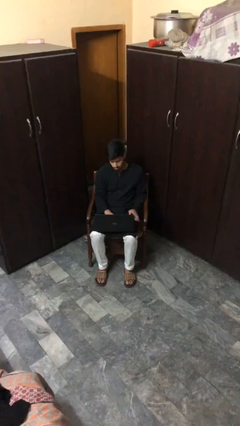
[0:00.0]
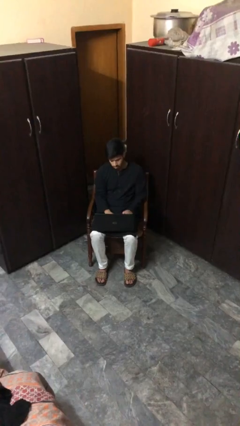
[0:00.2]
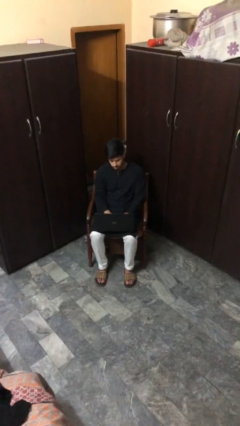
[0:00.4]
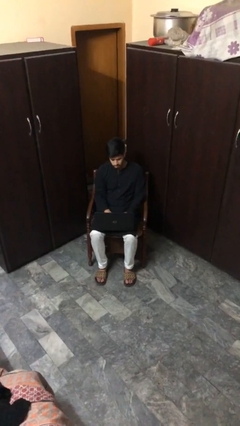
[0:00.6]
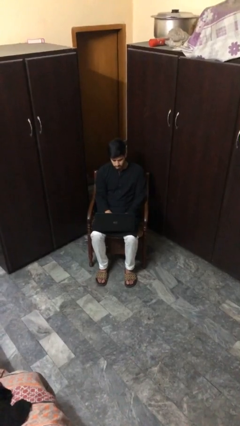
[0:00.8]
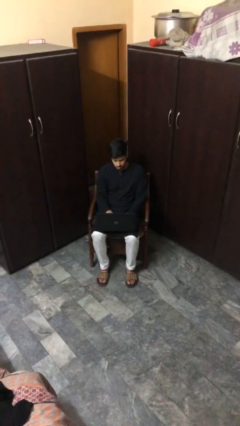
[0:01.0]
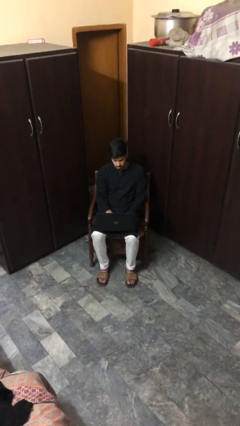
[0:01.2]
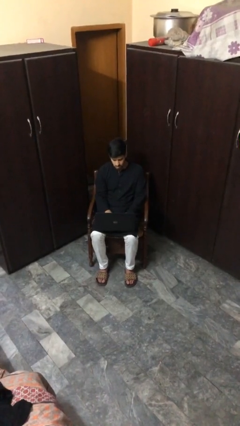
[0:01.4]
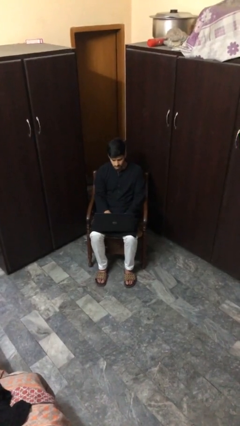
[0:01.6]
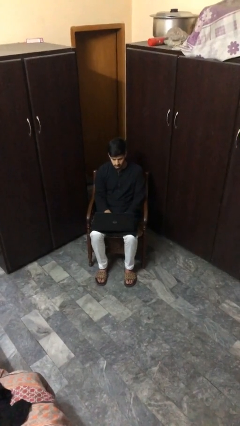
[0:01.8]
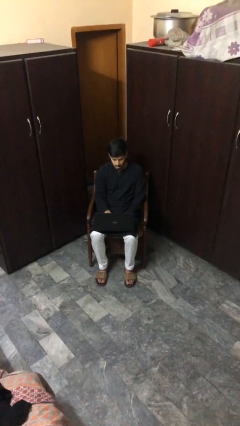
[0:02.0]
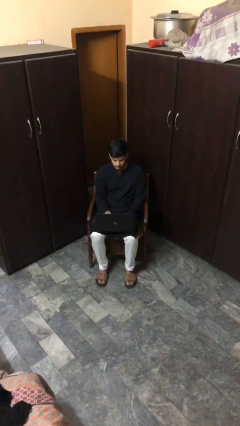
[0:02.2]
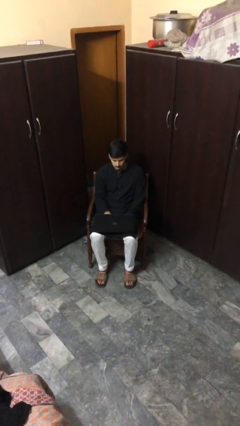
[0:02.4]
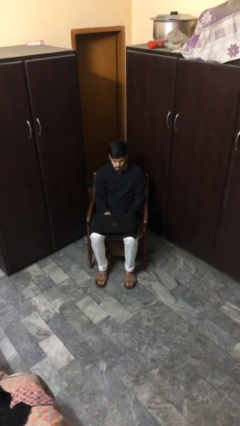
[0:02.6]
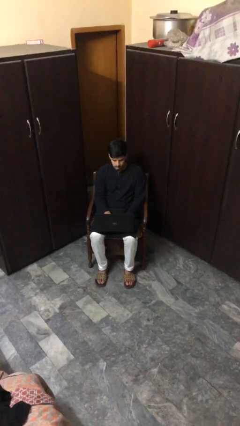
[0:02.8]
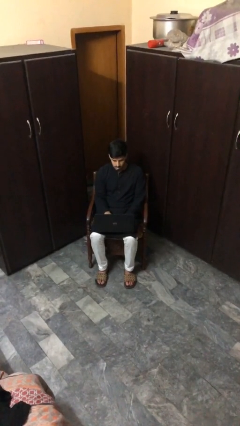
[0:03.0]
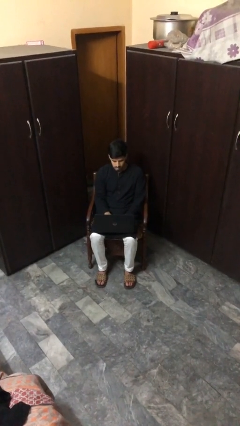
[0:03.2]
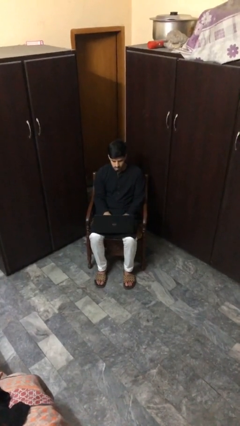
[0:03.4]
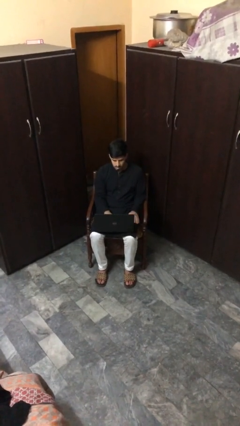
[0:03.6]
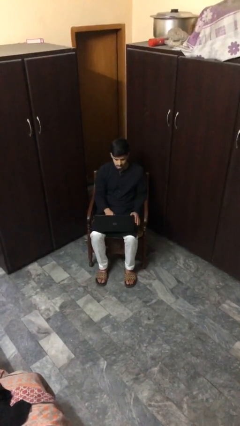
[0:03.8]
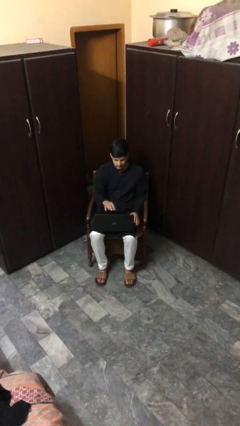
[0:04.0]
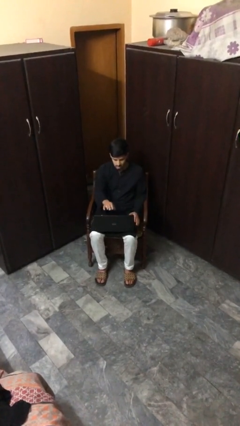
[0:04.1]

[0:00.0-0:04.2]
person interacts with laptop

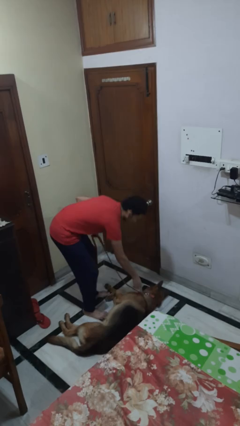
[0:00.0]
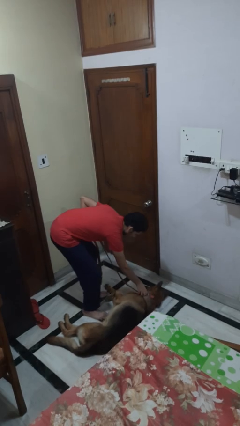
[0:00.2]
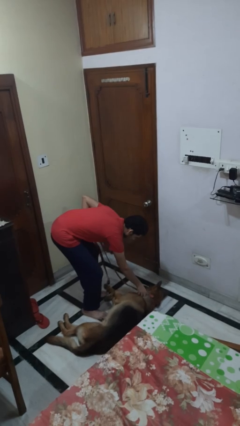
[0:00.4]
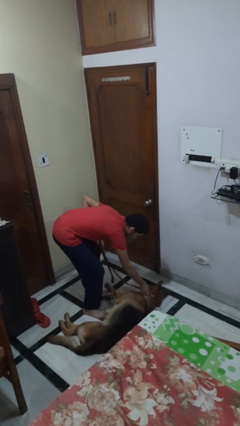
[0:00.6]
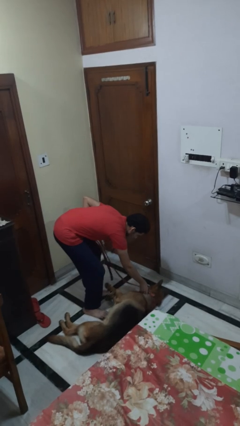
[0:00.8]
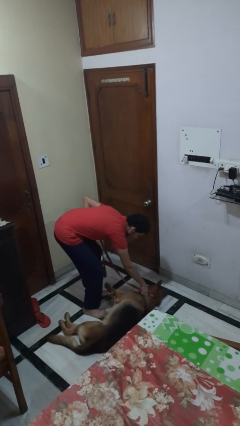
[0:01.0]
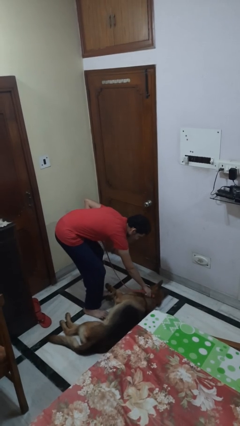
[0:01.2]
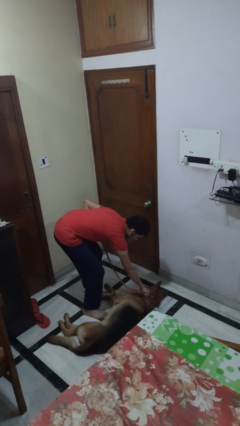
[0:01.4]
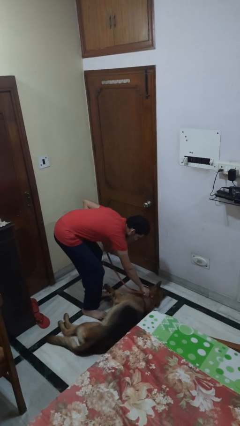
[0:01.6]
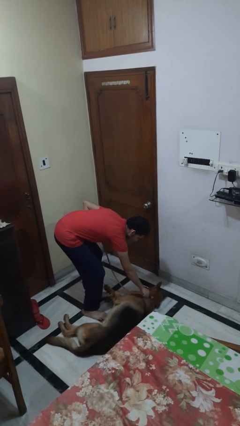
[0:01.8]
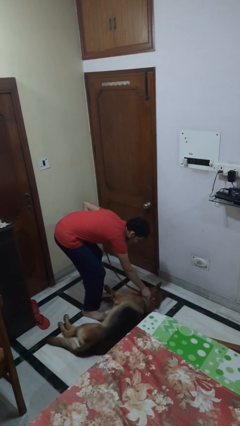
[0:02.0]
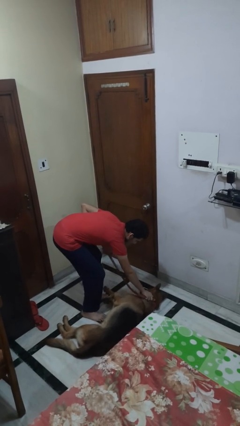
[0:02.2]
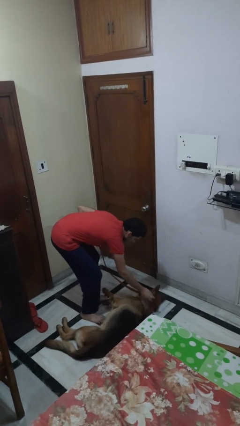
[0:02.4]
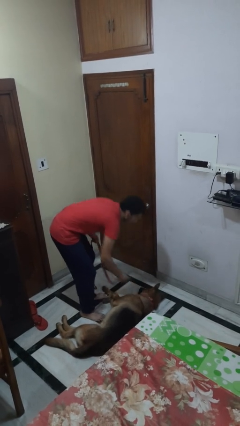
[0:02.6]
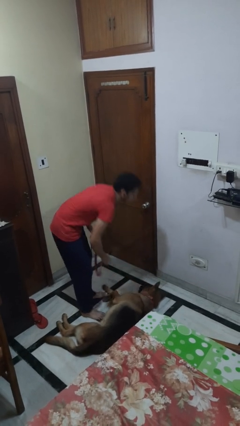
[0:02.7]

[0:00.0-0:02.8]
person unattaches leash from dog

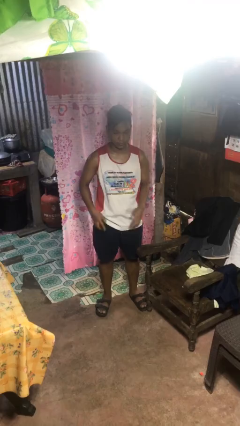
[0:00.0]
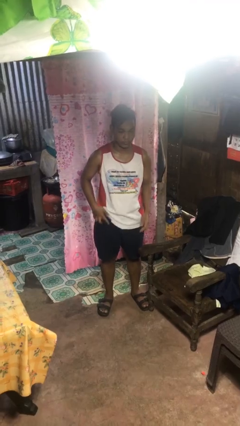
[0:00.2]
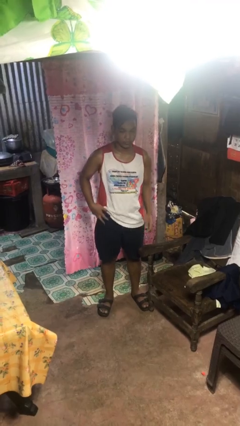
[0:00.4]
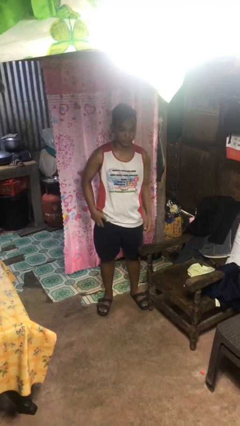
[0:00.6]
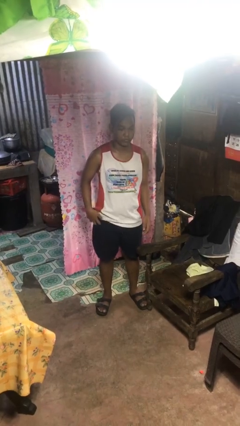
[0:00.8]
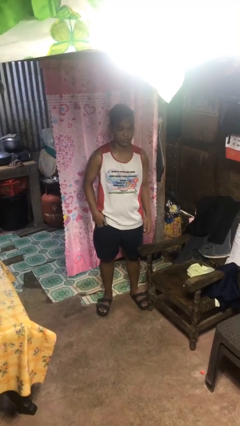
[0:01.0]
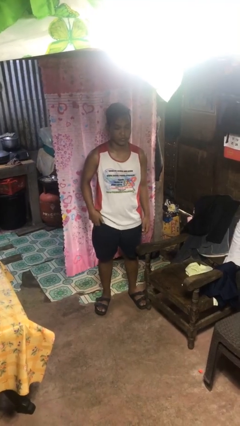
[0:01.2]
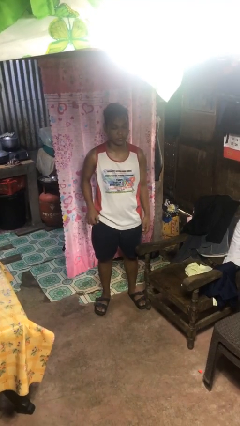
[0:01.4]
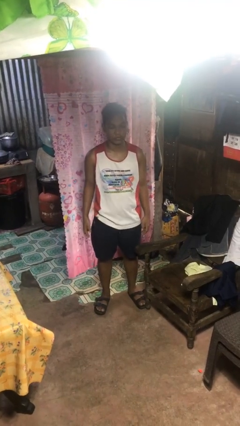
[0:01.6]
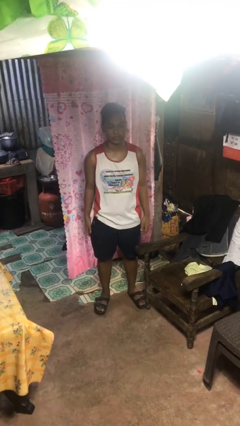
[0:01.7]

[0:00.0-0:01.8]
person puts phone into pocket

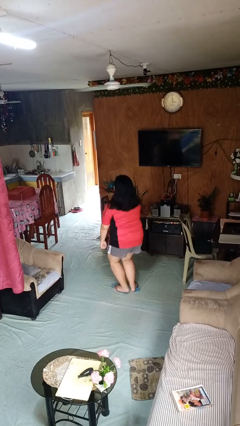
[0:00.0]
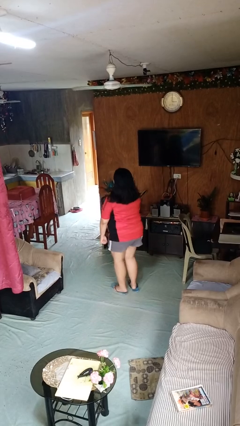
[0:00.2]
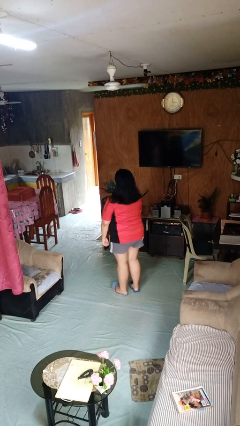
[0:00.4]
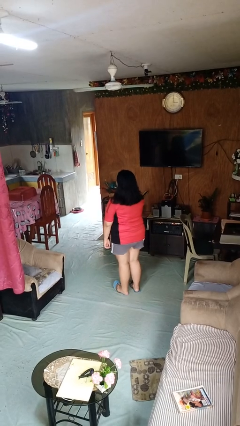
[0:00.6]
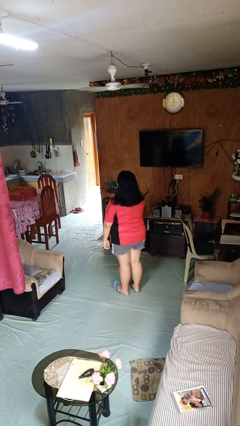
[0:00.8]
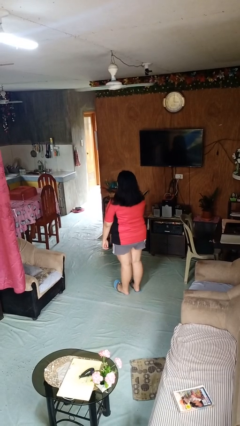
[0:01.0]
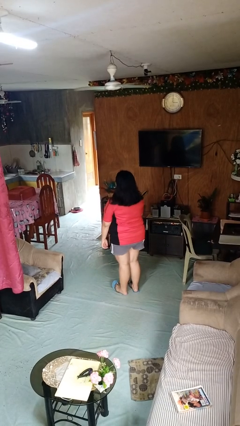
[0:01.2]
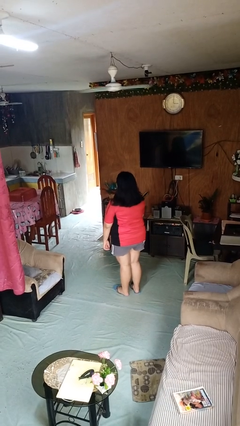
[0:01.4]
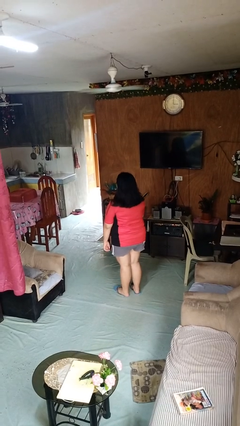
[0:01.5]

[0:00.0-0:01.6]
person stands up

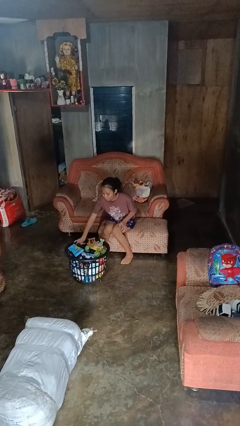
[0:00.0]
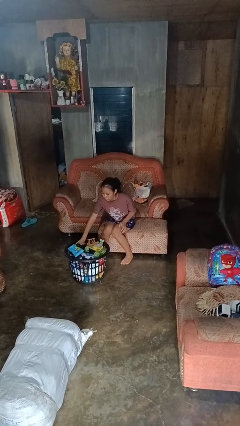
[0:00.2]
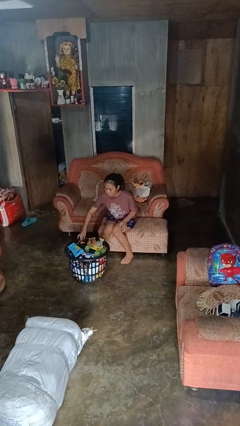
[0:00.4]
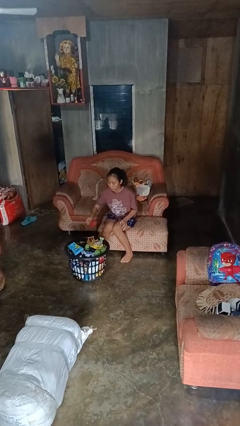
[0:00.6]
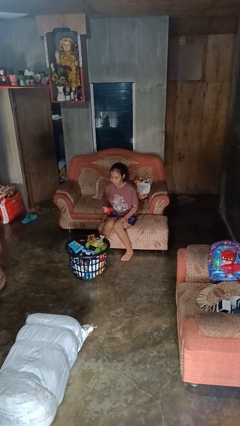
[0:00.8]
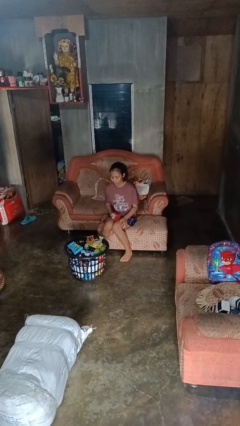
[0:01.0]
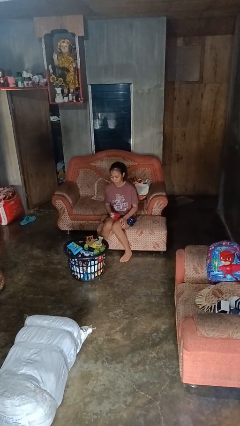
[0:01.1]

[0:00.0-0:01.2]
person takes object from basket

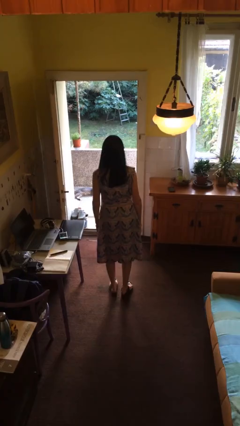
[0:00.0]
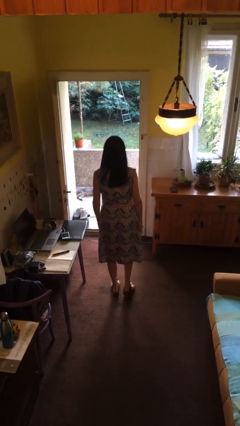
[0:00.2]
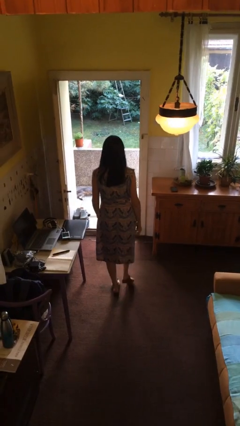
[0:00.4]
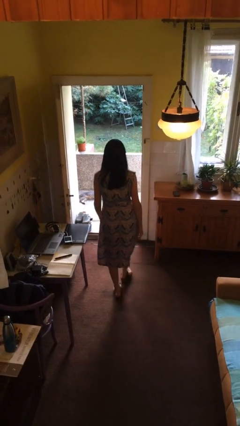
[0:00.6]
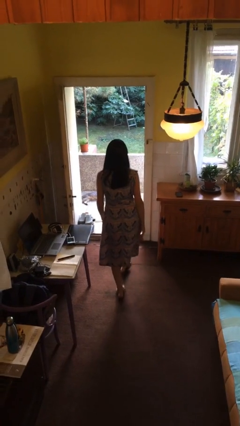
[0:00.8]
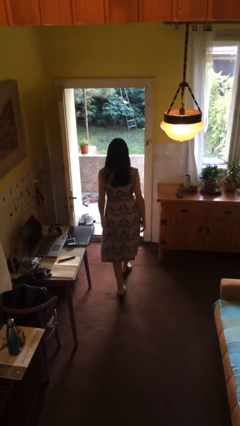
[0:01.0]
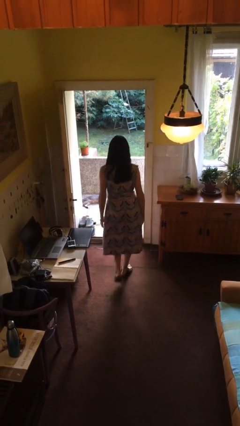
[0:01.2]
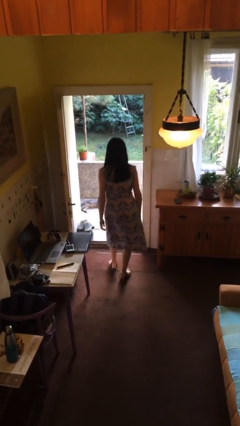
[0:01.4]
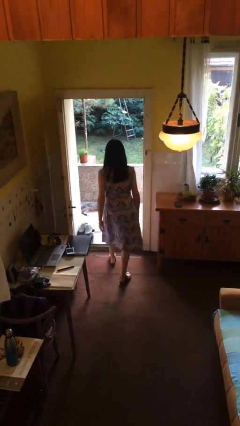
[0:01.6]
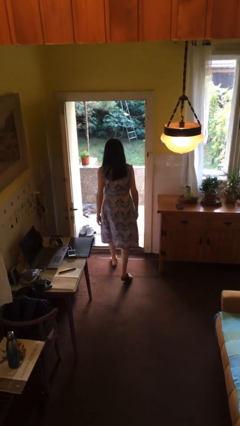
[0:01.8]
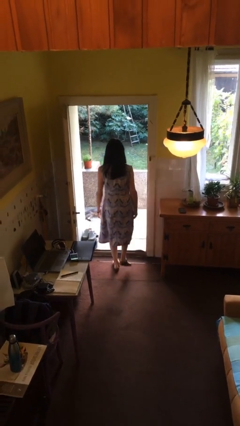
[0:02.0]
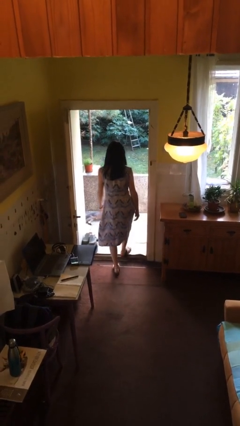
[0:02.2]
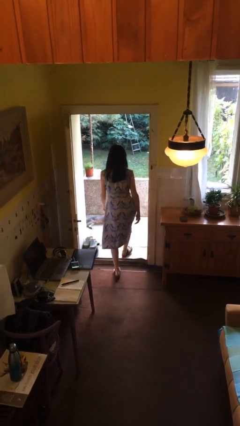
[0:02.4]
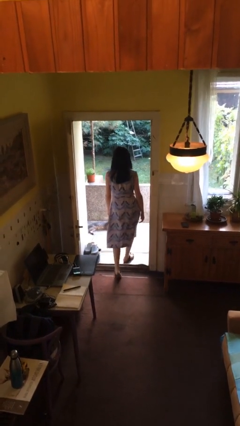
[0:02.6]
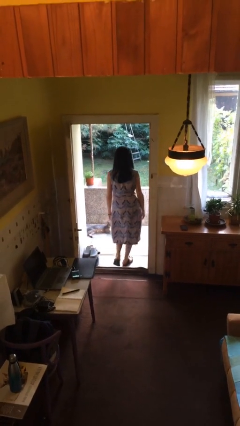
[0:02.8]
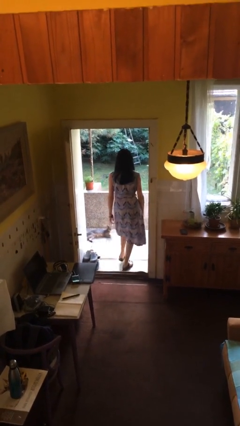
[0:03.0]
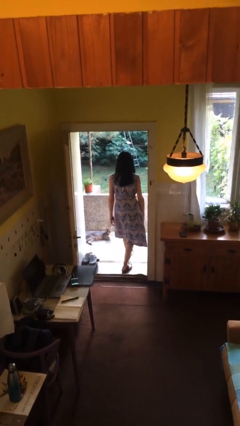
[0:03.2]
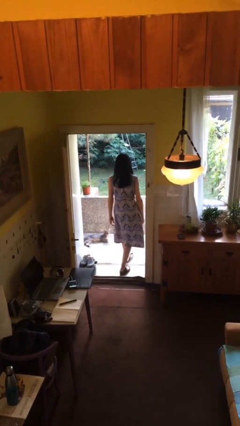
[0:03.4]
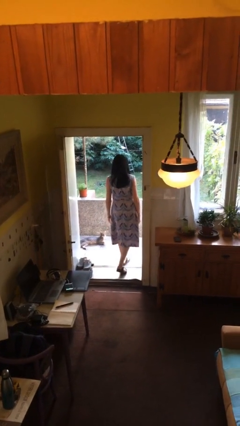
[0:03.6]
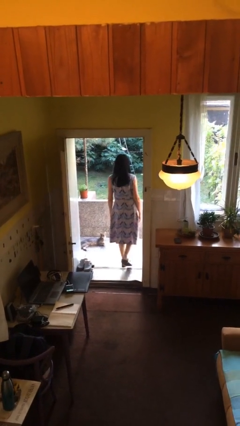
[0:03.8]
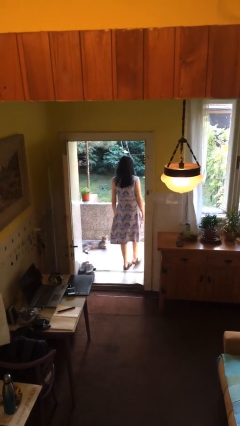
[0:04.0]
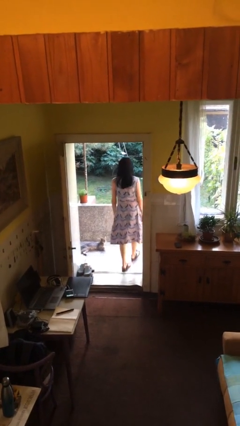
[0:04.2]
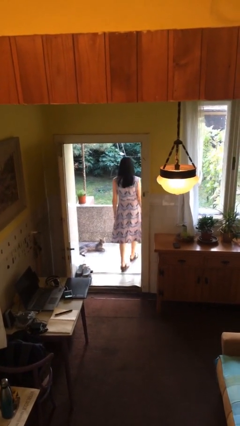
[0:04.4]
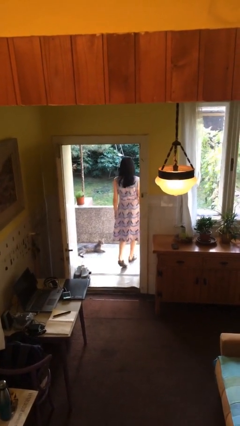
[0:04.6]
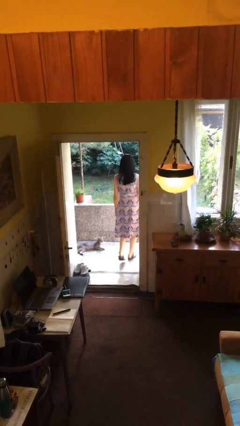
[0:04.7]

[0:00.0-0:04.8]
person exits scene through structure

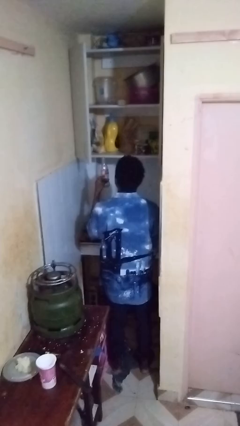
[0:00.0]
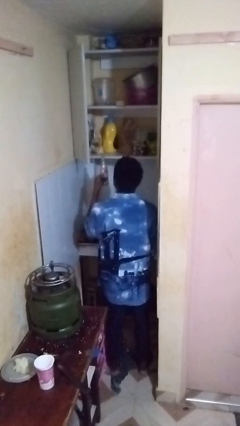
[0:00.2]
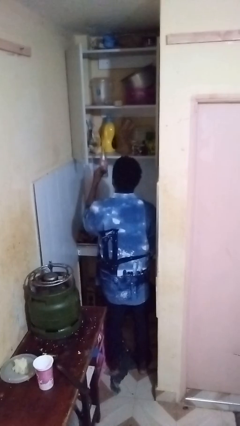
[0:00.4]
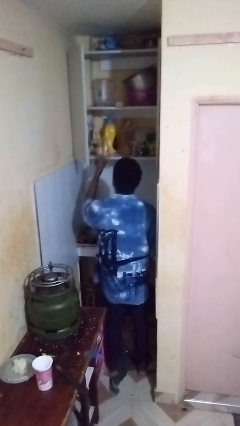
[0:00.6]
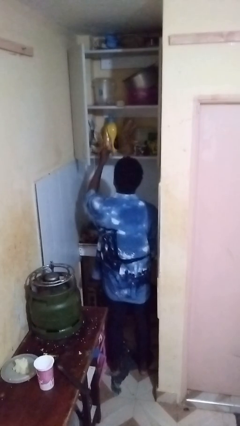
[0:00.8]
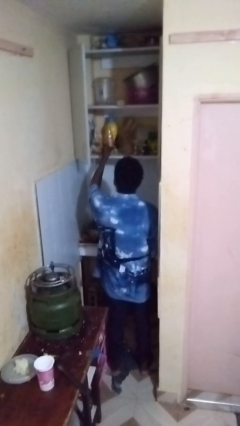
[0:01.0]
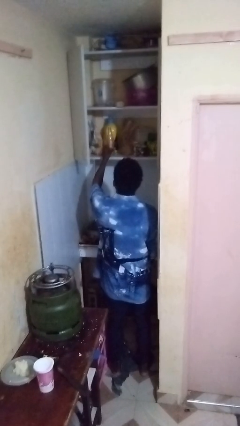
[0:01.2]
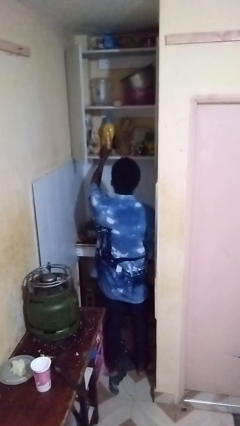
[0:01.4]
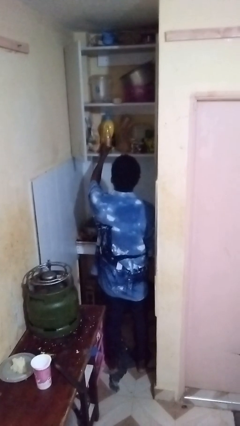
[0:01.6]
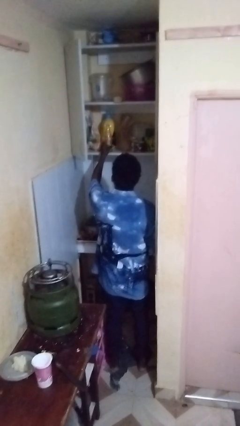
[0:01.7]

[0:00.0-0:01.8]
person puts down object into cabinet
